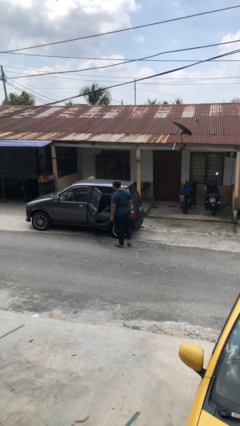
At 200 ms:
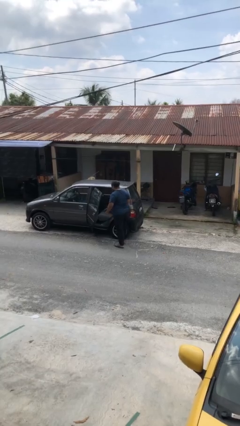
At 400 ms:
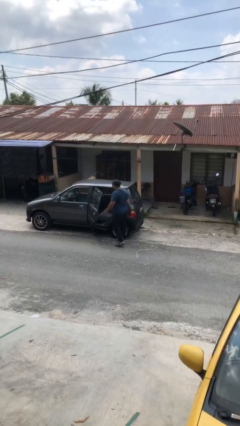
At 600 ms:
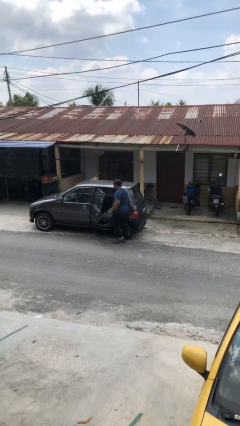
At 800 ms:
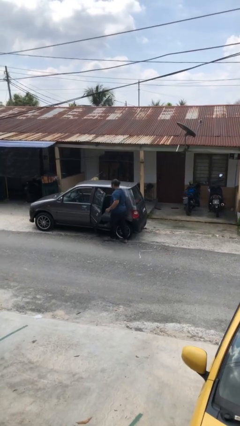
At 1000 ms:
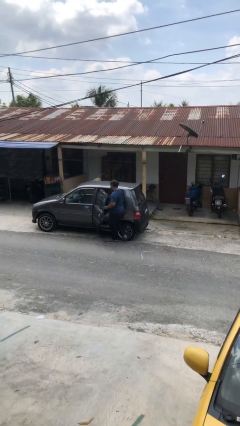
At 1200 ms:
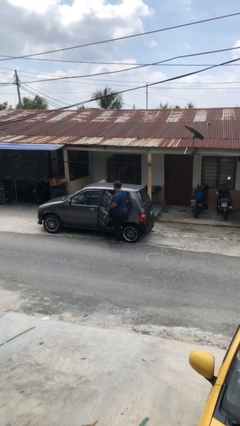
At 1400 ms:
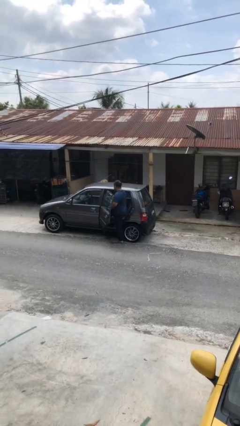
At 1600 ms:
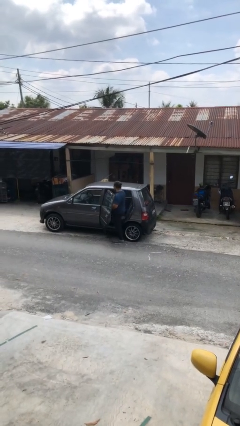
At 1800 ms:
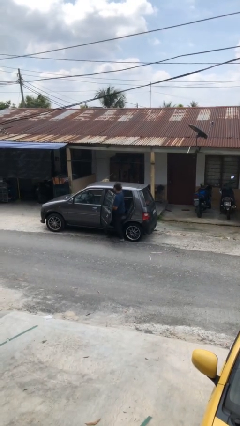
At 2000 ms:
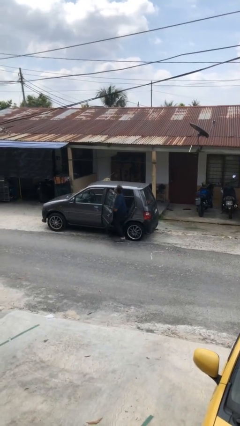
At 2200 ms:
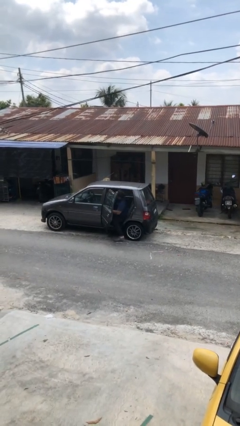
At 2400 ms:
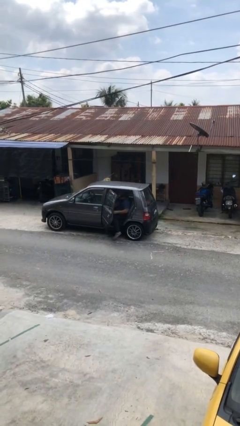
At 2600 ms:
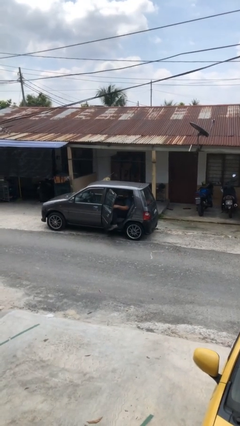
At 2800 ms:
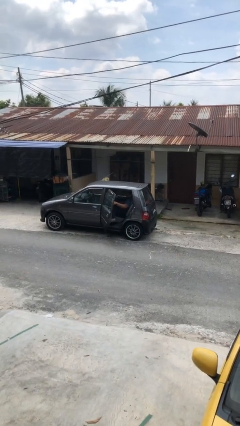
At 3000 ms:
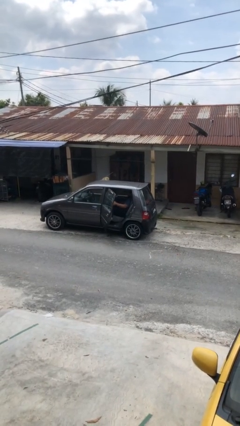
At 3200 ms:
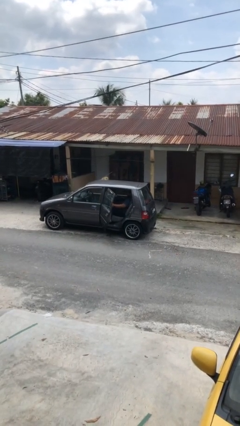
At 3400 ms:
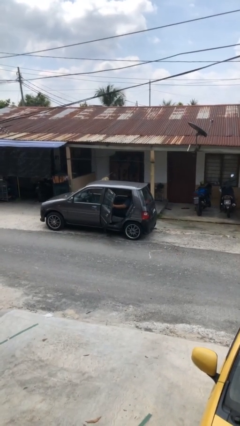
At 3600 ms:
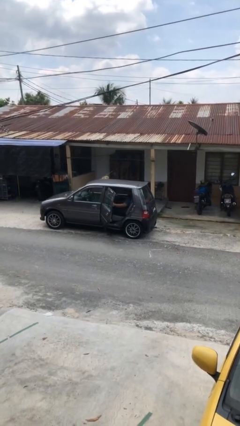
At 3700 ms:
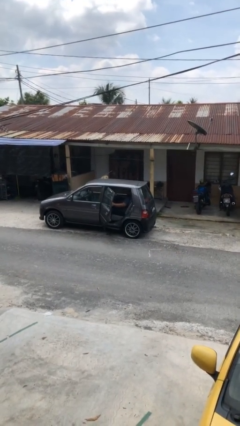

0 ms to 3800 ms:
person enters car

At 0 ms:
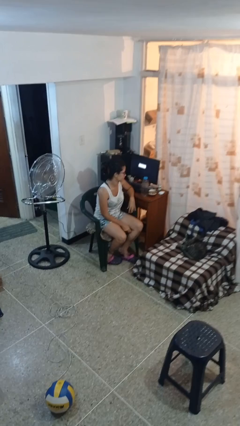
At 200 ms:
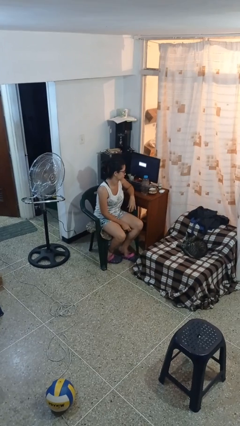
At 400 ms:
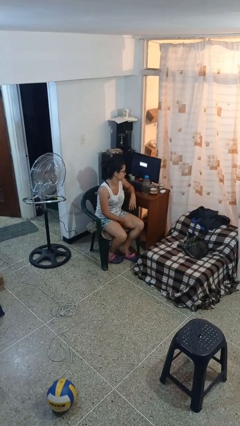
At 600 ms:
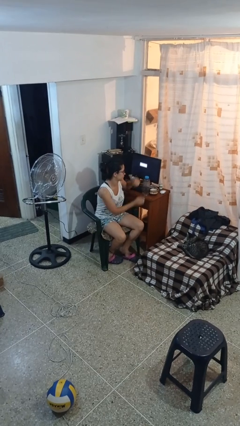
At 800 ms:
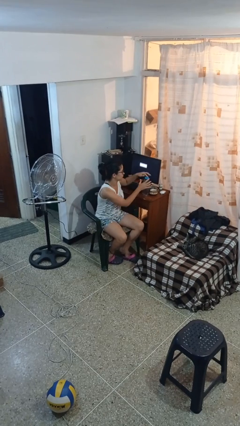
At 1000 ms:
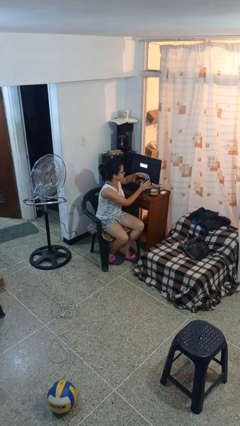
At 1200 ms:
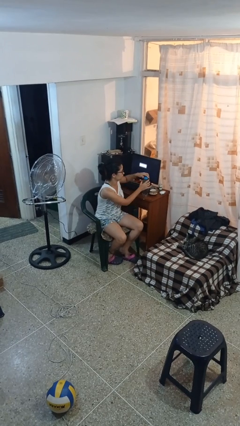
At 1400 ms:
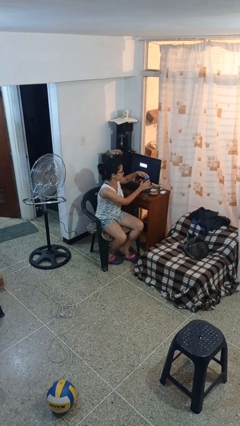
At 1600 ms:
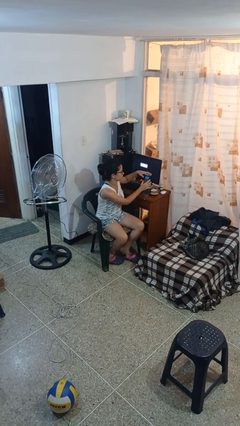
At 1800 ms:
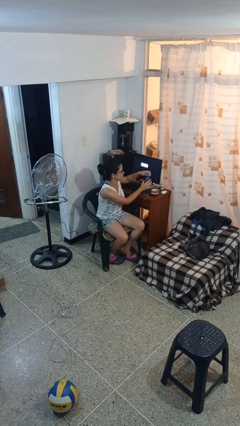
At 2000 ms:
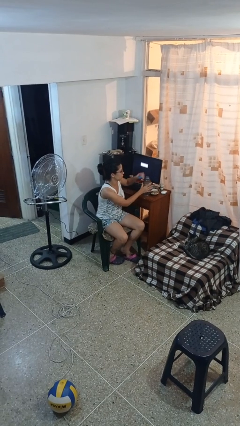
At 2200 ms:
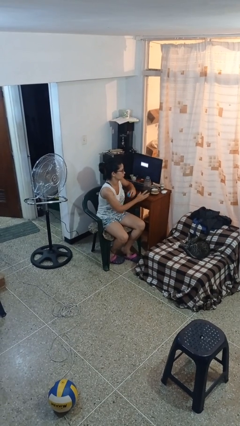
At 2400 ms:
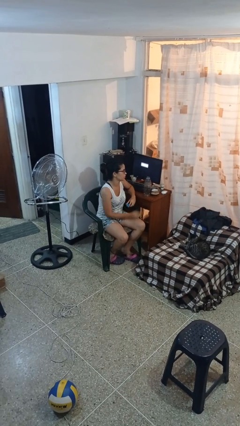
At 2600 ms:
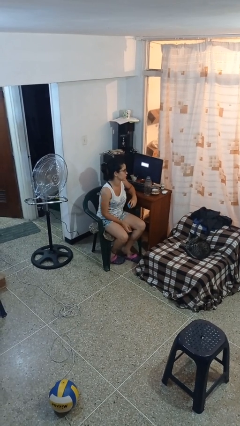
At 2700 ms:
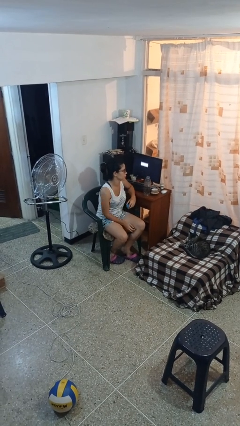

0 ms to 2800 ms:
person unscrews lid from bottle

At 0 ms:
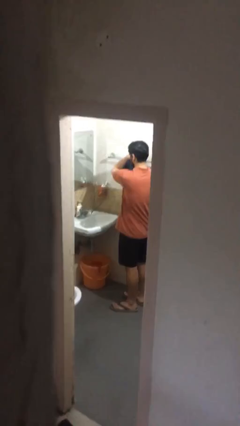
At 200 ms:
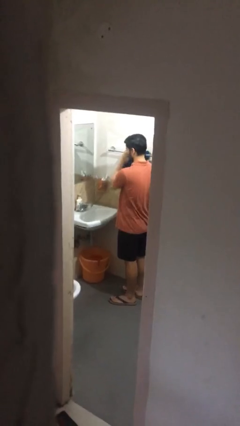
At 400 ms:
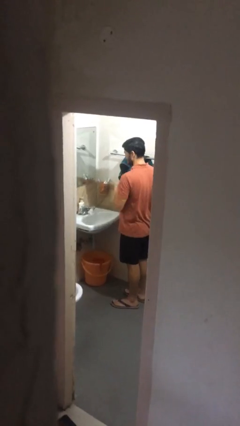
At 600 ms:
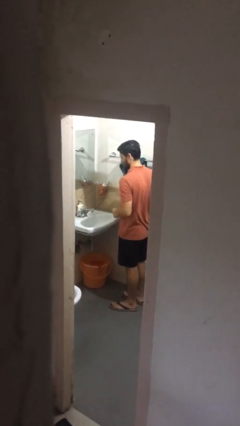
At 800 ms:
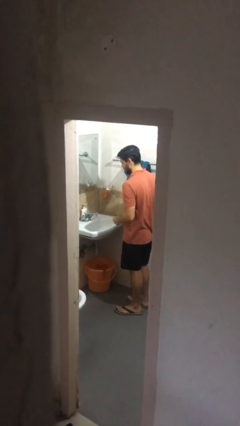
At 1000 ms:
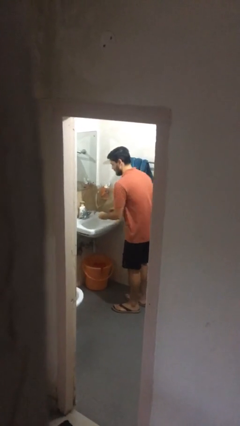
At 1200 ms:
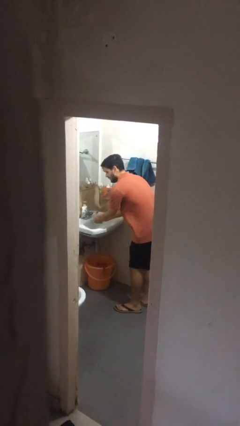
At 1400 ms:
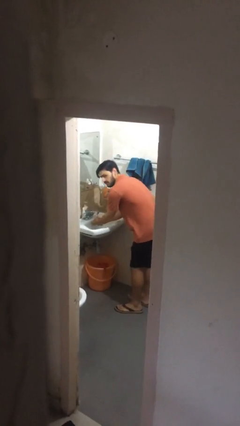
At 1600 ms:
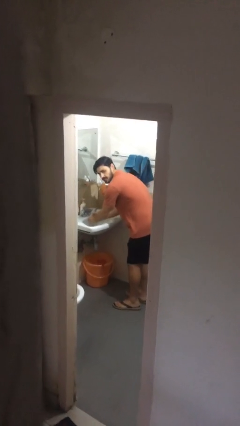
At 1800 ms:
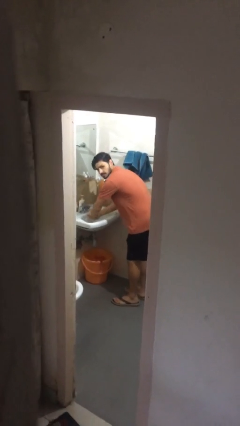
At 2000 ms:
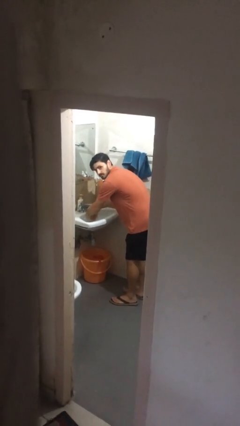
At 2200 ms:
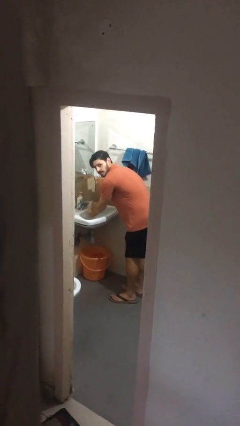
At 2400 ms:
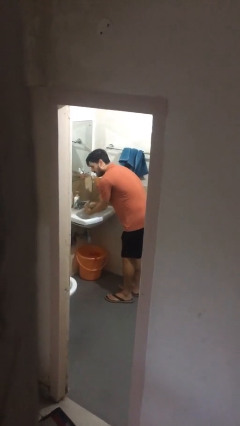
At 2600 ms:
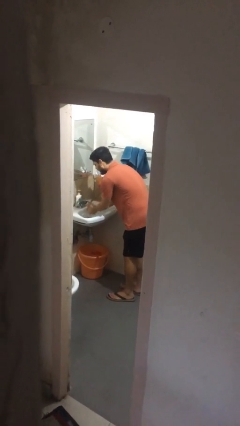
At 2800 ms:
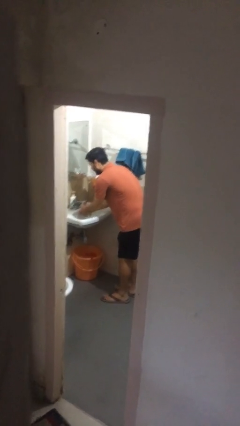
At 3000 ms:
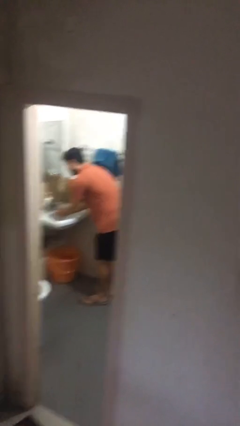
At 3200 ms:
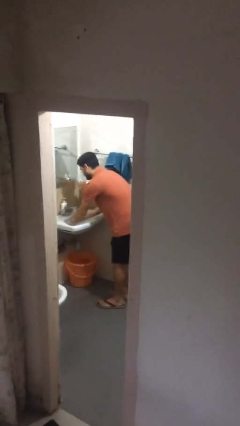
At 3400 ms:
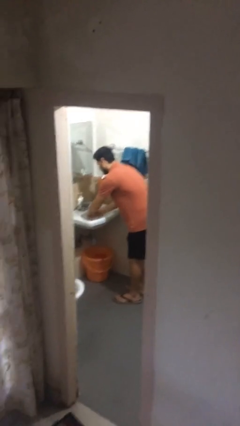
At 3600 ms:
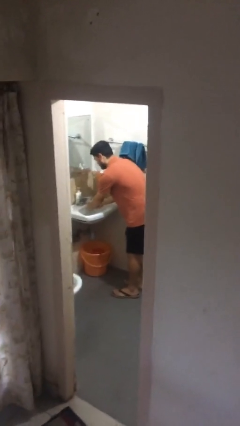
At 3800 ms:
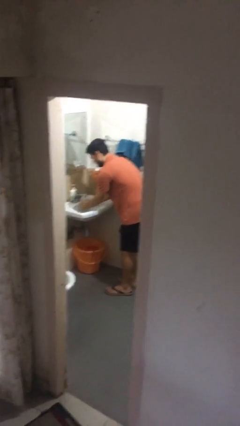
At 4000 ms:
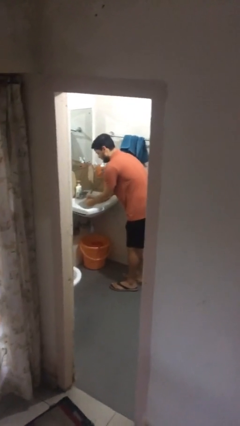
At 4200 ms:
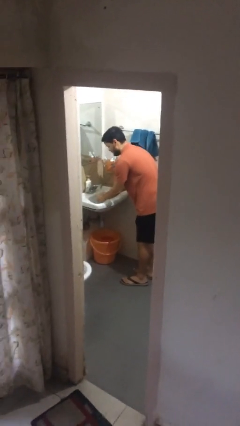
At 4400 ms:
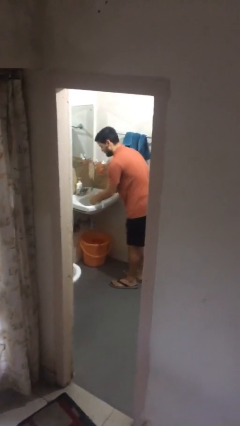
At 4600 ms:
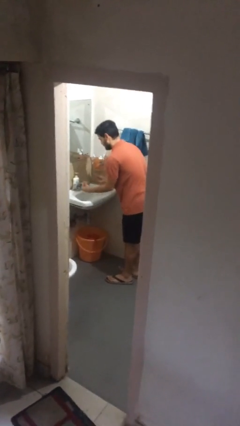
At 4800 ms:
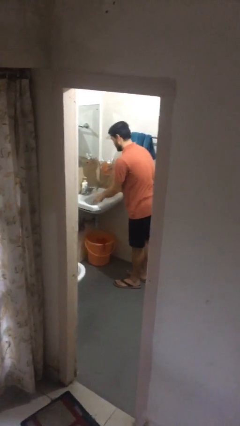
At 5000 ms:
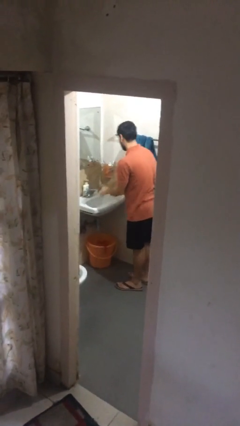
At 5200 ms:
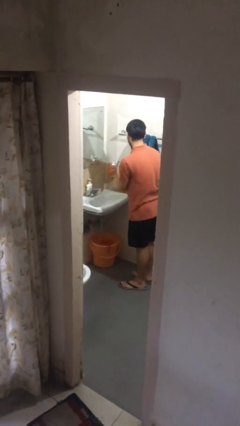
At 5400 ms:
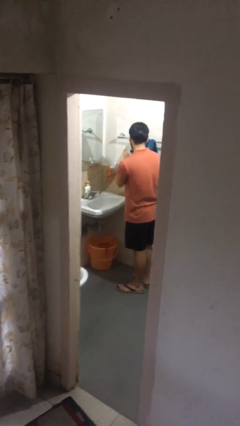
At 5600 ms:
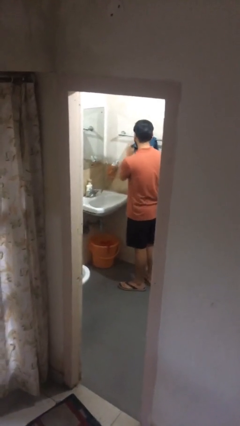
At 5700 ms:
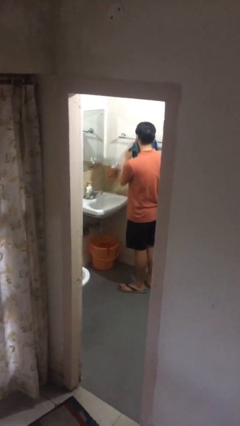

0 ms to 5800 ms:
person washes hands

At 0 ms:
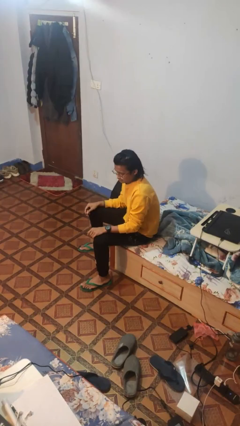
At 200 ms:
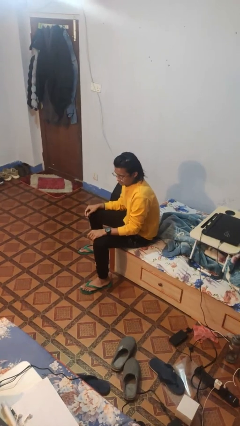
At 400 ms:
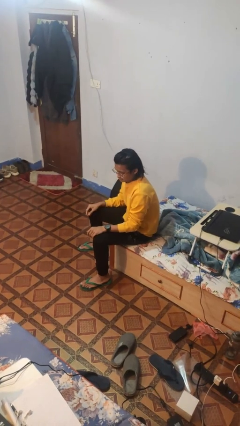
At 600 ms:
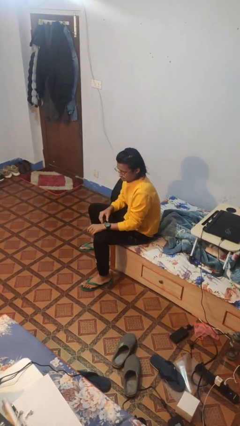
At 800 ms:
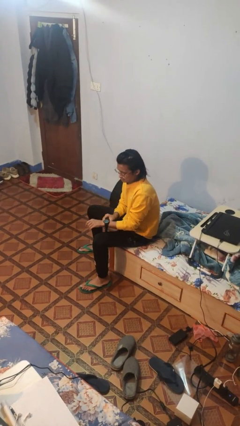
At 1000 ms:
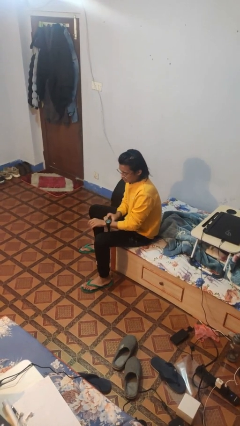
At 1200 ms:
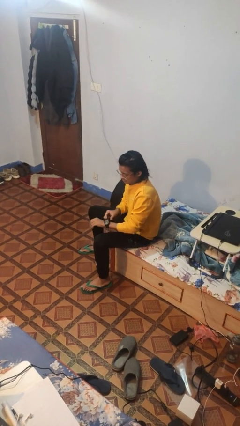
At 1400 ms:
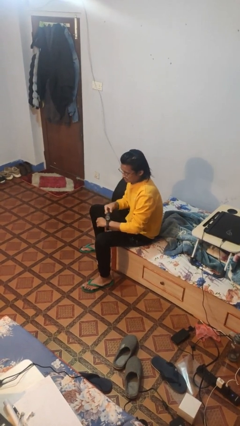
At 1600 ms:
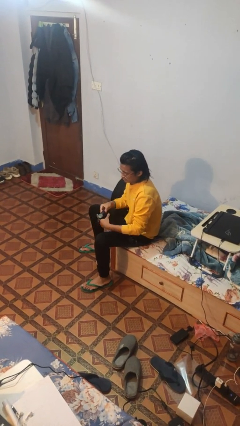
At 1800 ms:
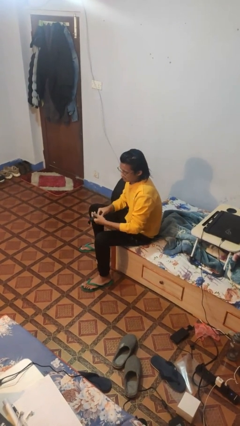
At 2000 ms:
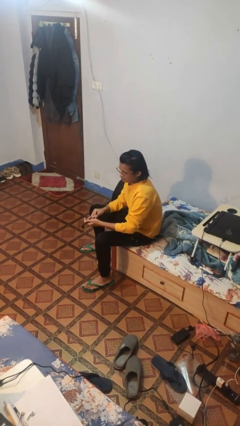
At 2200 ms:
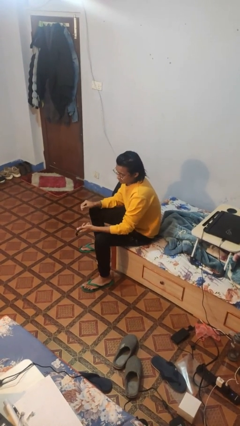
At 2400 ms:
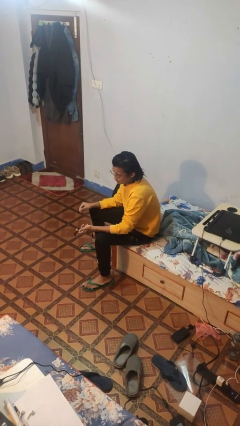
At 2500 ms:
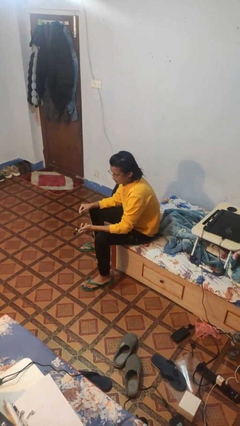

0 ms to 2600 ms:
person takes off wristwatch

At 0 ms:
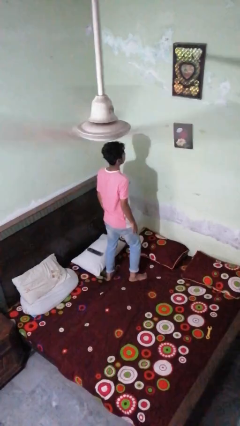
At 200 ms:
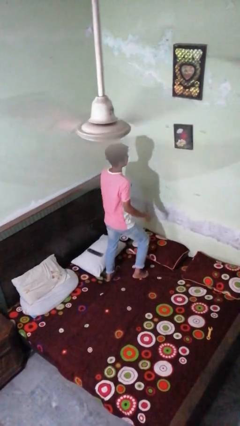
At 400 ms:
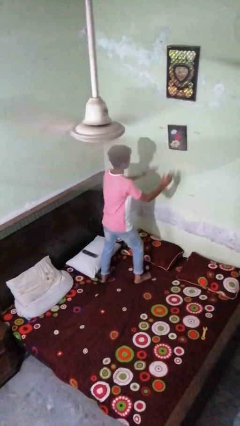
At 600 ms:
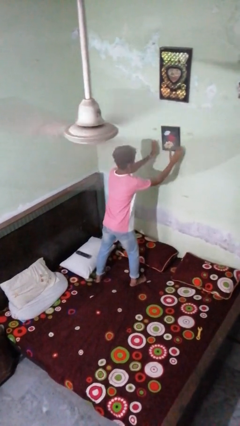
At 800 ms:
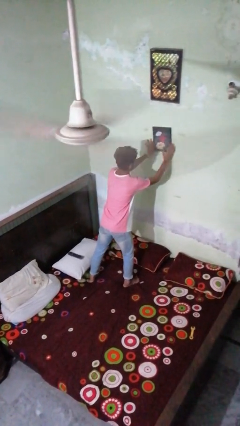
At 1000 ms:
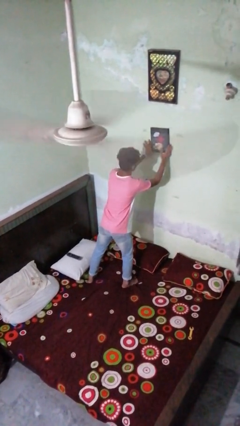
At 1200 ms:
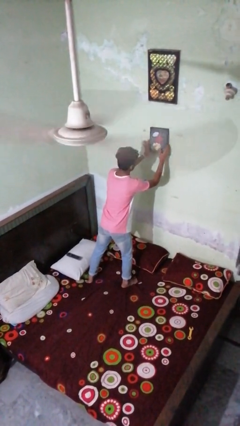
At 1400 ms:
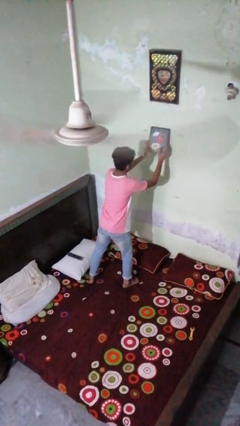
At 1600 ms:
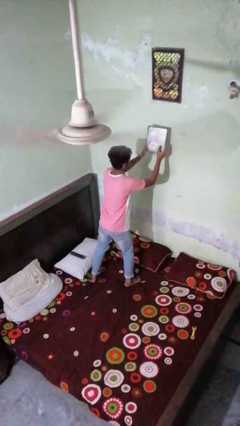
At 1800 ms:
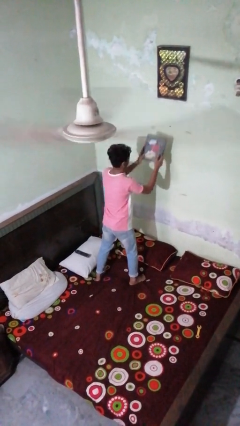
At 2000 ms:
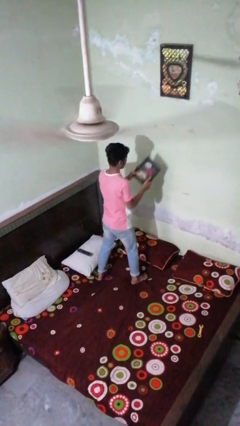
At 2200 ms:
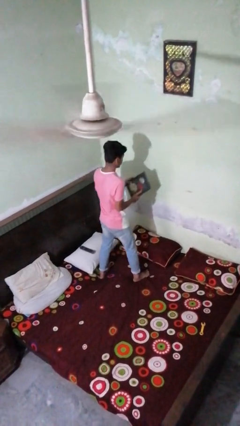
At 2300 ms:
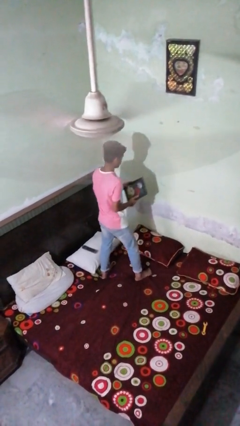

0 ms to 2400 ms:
person takes down picture frame
